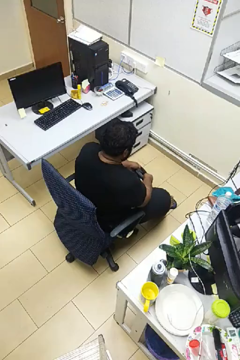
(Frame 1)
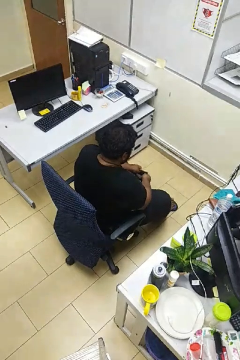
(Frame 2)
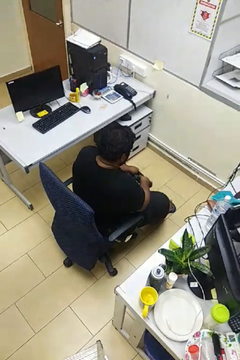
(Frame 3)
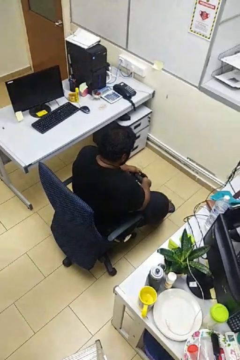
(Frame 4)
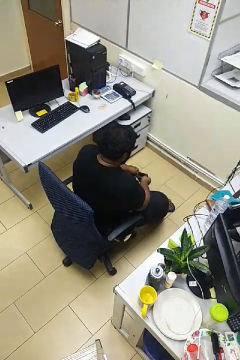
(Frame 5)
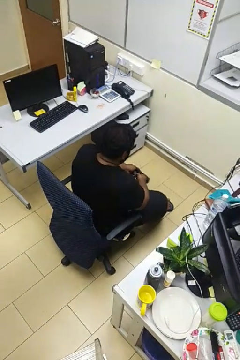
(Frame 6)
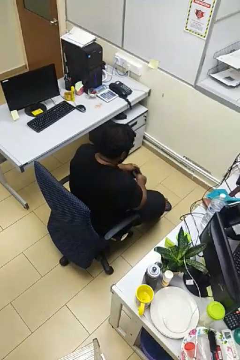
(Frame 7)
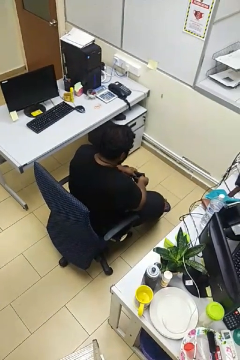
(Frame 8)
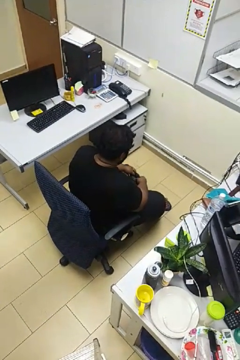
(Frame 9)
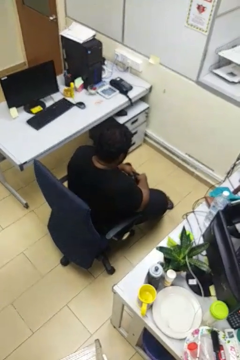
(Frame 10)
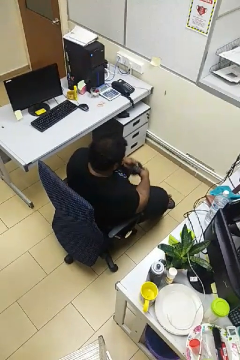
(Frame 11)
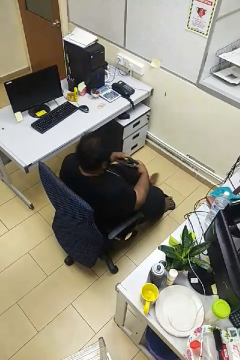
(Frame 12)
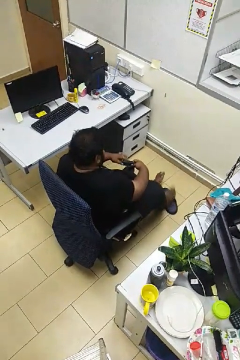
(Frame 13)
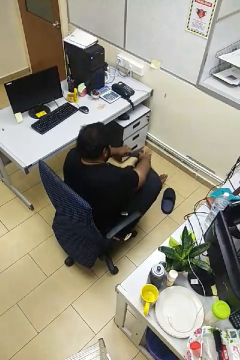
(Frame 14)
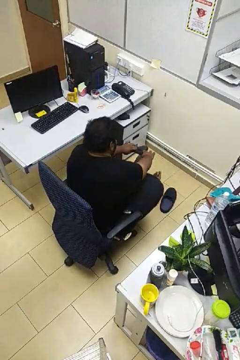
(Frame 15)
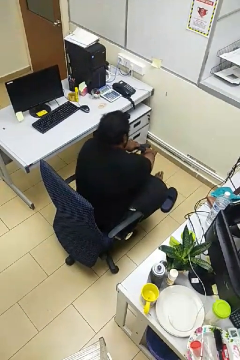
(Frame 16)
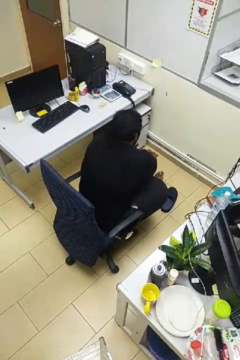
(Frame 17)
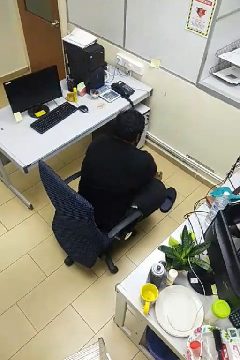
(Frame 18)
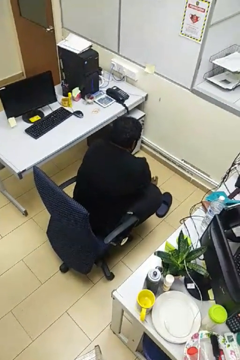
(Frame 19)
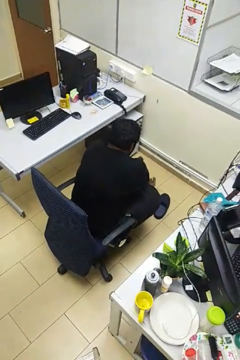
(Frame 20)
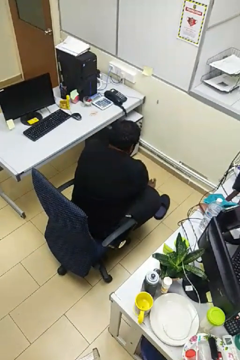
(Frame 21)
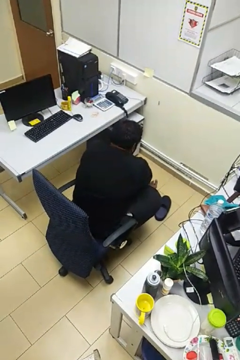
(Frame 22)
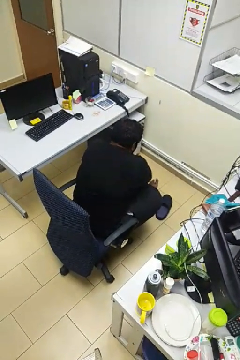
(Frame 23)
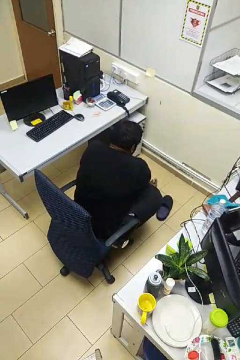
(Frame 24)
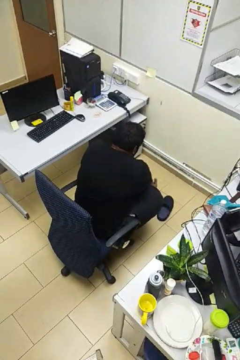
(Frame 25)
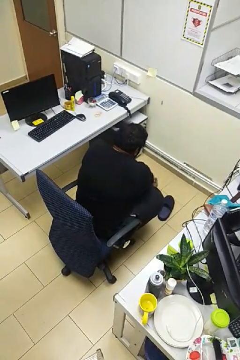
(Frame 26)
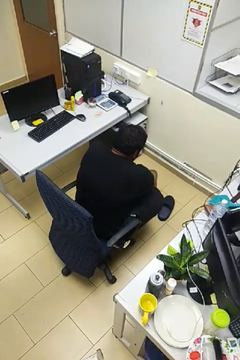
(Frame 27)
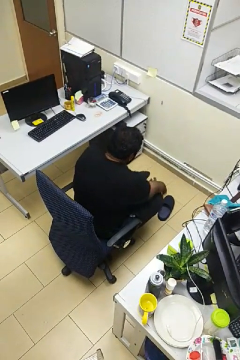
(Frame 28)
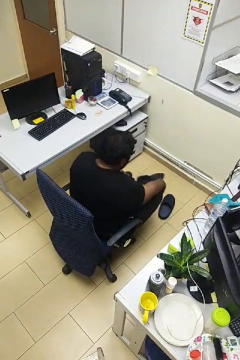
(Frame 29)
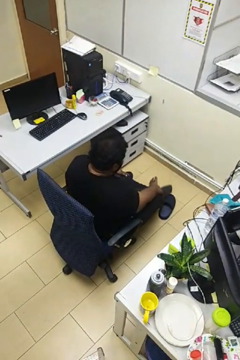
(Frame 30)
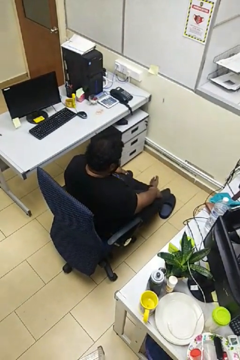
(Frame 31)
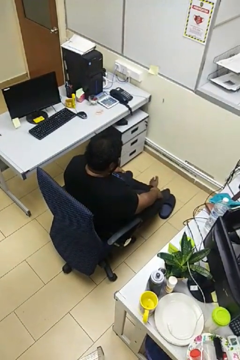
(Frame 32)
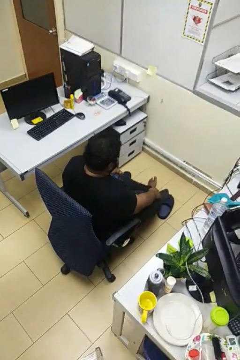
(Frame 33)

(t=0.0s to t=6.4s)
person puts on socks

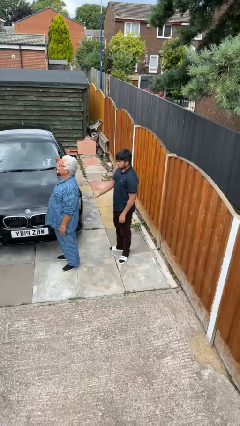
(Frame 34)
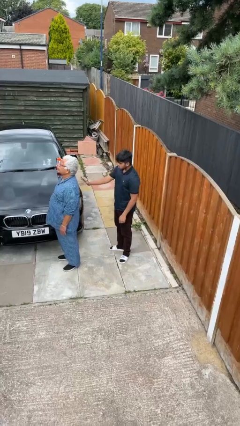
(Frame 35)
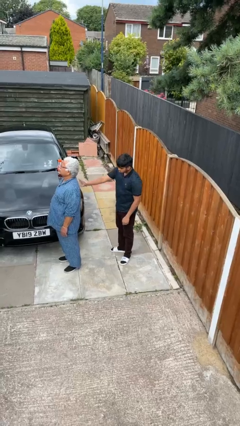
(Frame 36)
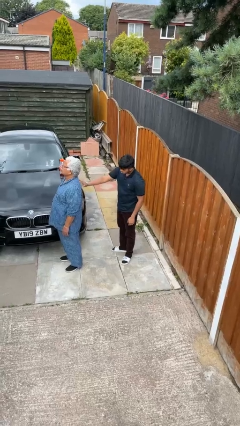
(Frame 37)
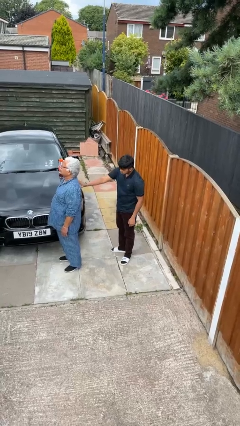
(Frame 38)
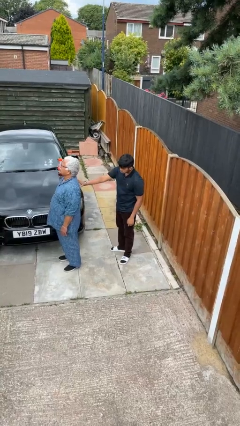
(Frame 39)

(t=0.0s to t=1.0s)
person touches back of person

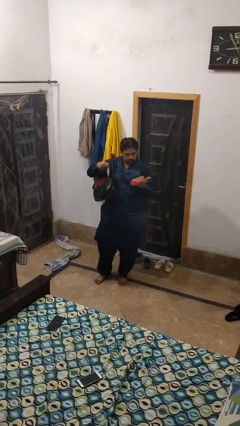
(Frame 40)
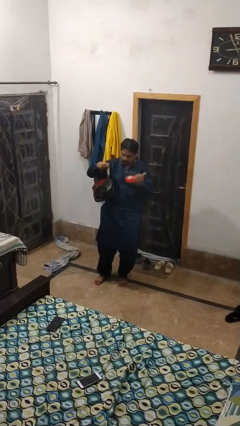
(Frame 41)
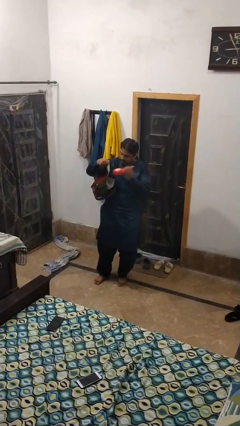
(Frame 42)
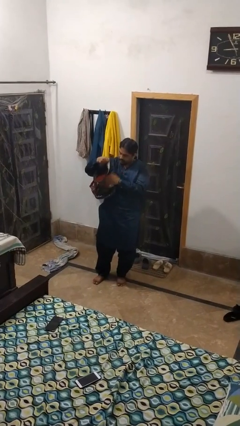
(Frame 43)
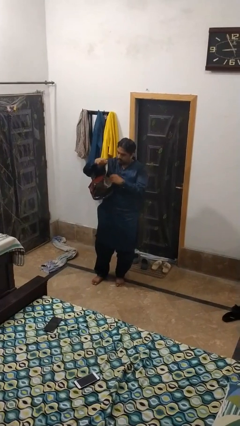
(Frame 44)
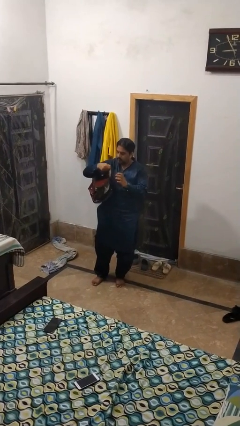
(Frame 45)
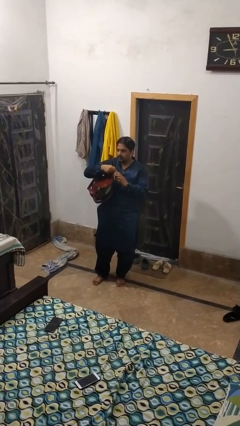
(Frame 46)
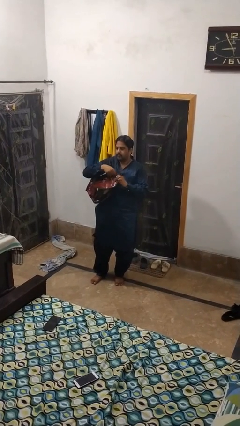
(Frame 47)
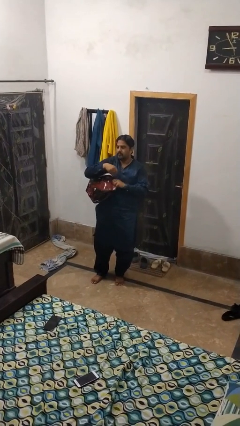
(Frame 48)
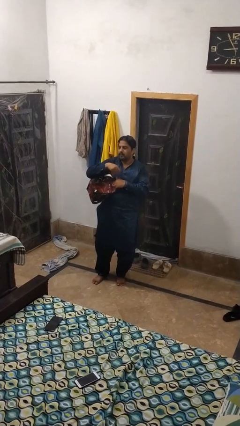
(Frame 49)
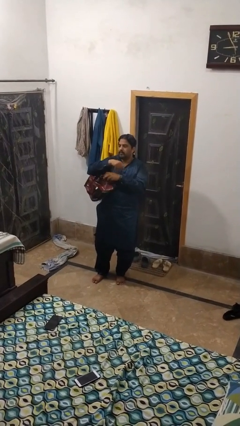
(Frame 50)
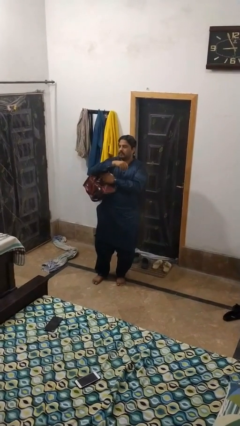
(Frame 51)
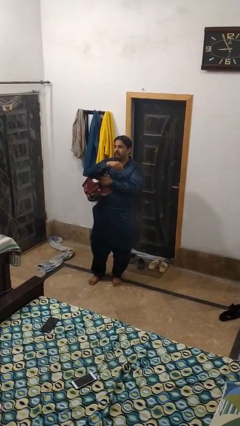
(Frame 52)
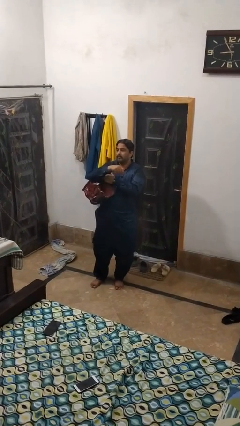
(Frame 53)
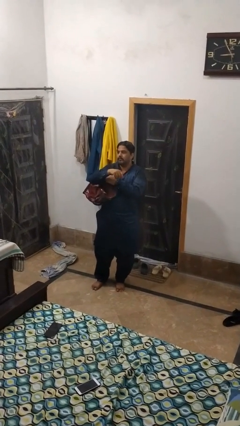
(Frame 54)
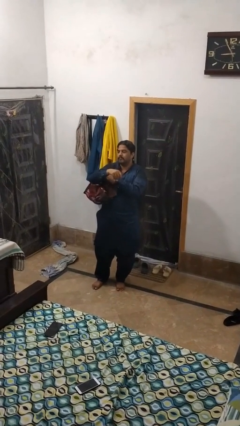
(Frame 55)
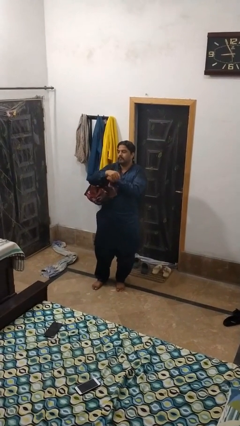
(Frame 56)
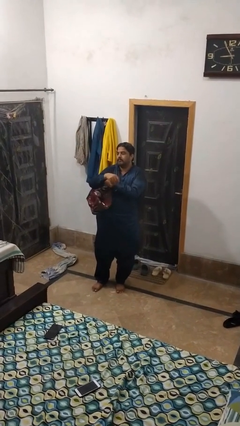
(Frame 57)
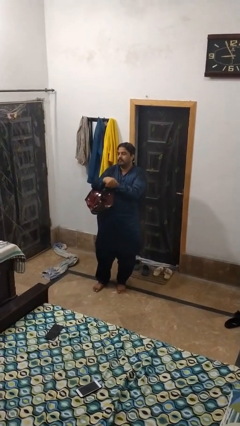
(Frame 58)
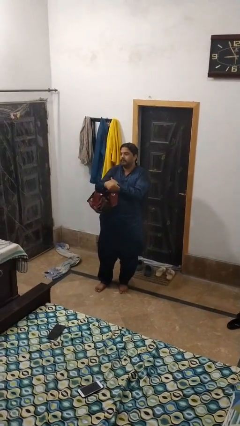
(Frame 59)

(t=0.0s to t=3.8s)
person puts object into purse

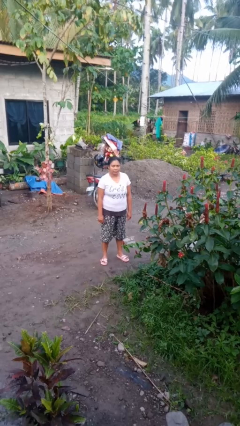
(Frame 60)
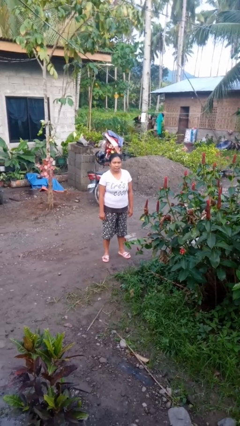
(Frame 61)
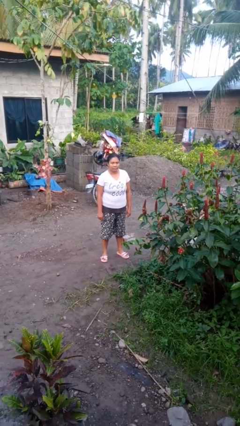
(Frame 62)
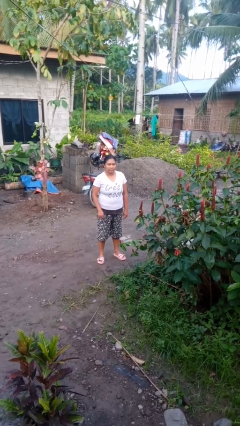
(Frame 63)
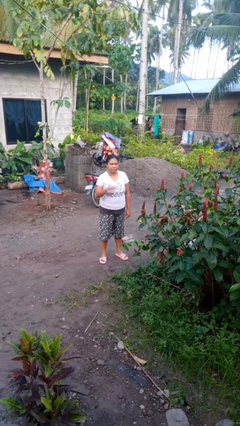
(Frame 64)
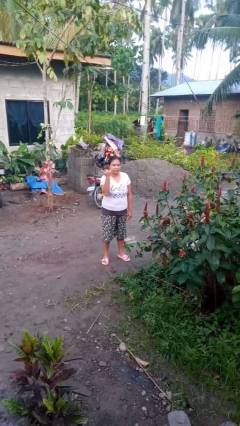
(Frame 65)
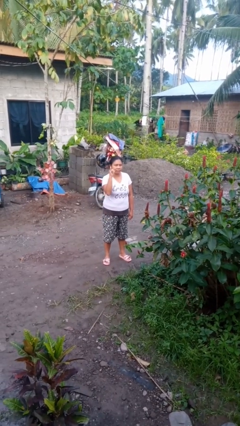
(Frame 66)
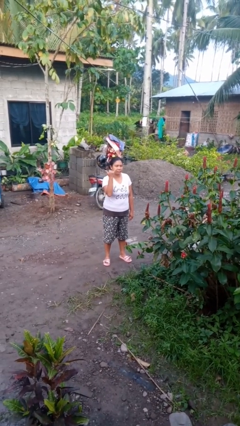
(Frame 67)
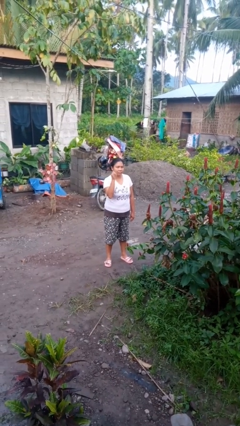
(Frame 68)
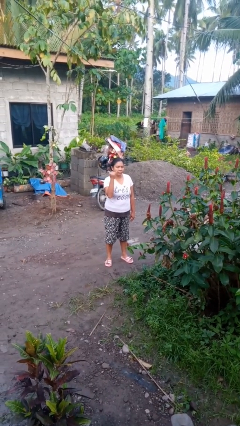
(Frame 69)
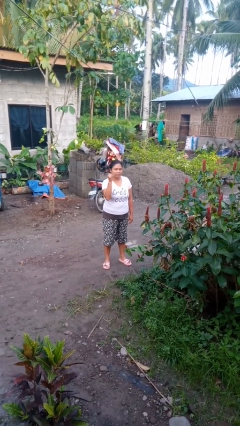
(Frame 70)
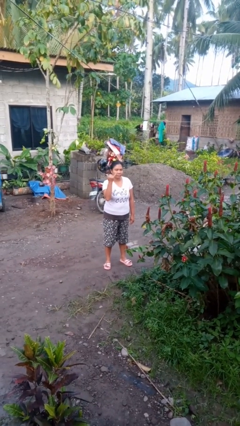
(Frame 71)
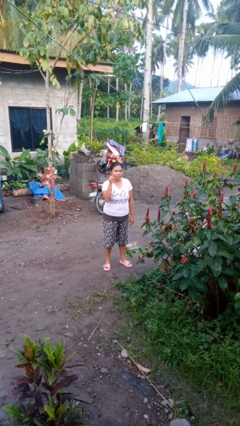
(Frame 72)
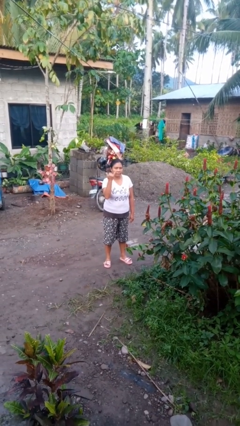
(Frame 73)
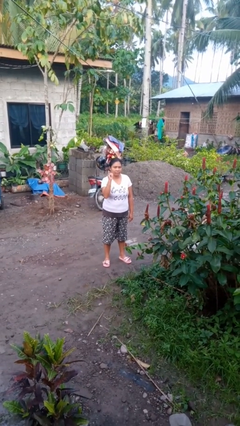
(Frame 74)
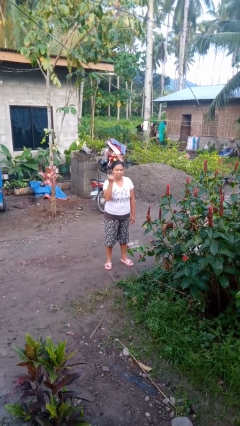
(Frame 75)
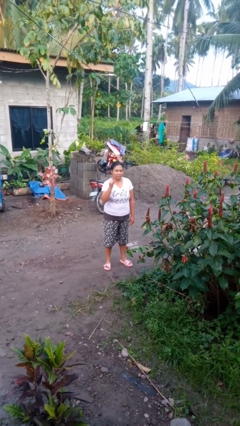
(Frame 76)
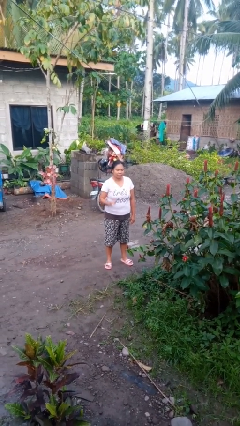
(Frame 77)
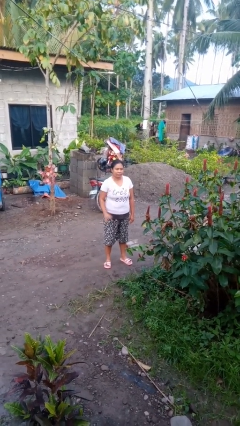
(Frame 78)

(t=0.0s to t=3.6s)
person gestures hang loose

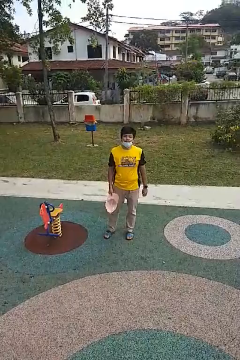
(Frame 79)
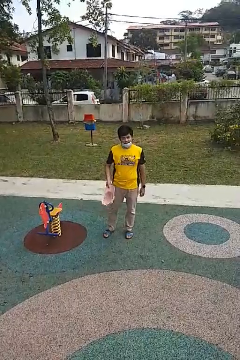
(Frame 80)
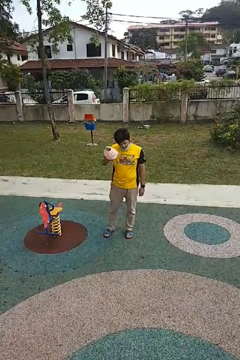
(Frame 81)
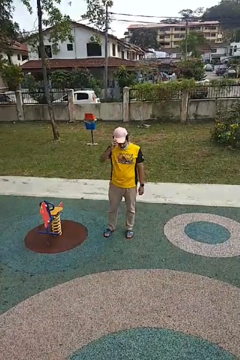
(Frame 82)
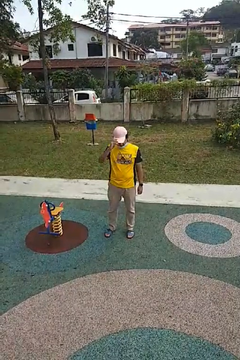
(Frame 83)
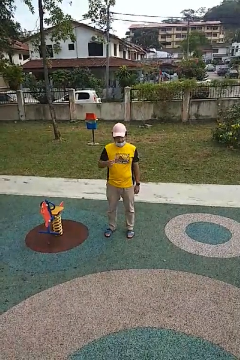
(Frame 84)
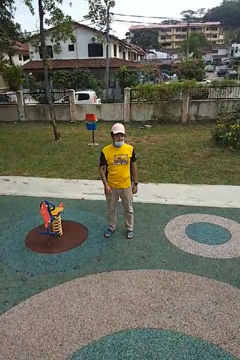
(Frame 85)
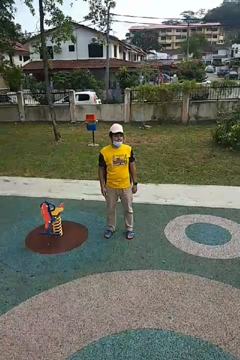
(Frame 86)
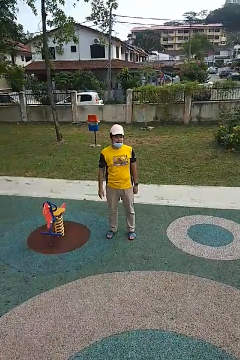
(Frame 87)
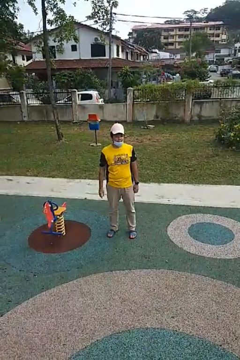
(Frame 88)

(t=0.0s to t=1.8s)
person puts on hat

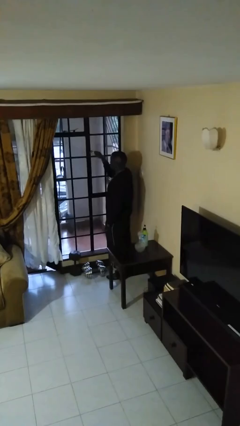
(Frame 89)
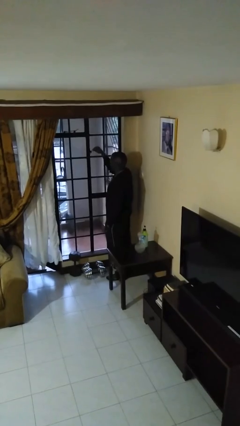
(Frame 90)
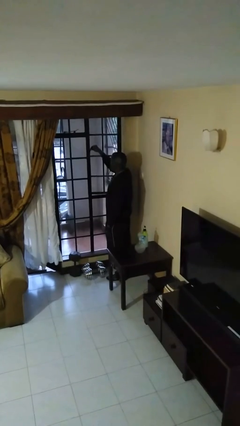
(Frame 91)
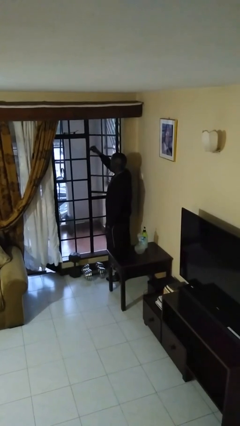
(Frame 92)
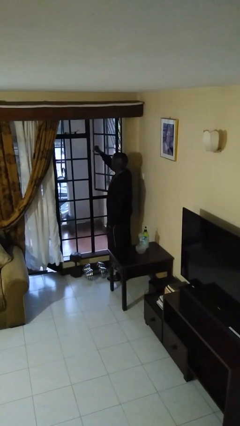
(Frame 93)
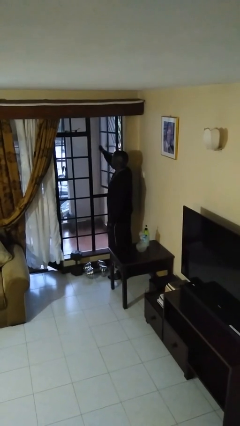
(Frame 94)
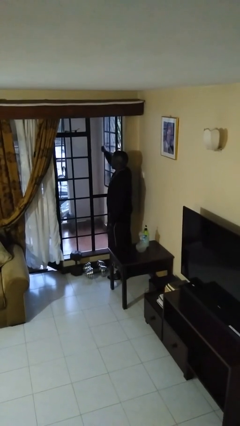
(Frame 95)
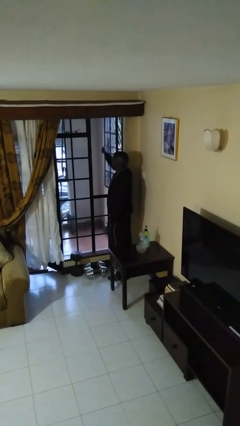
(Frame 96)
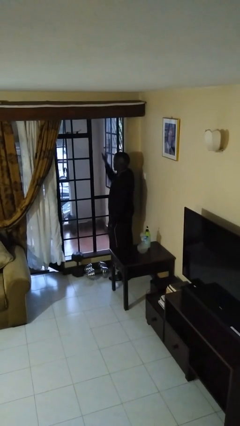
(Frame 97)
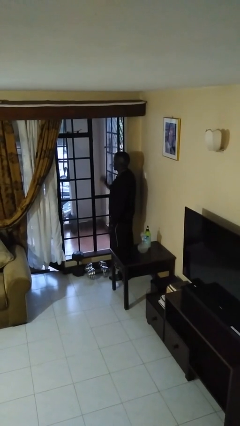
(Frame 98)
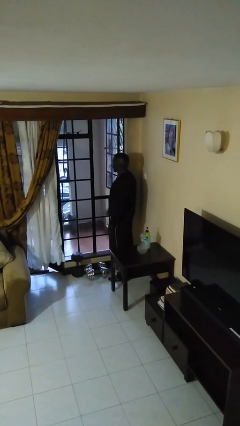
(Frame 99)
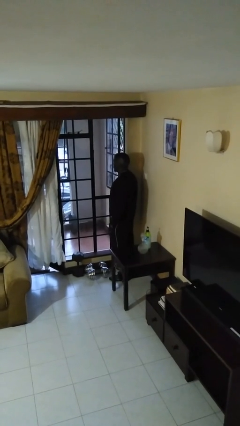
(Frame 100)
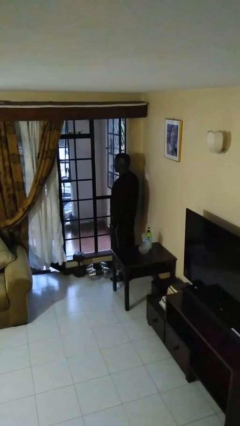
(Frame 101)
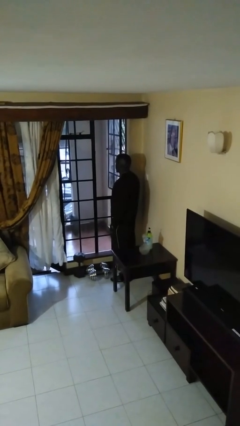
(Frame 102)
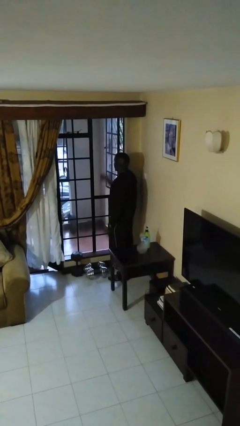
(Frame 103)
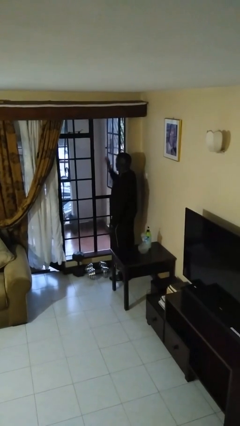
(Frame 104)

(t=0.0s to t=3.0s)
person opens home window
